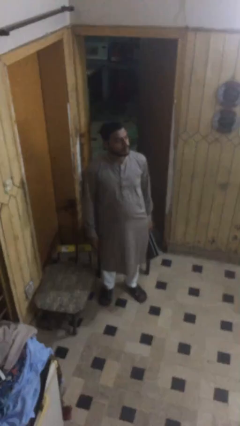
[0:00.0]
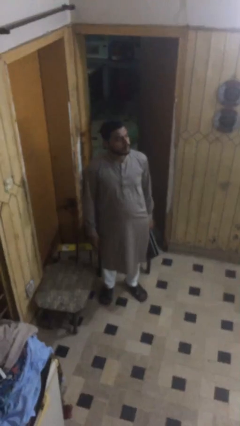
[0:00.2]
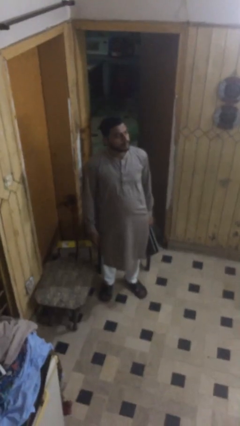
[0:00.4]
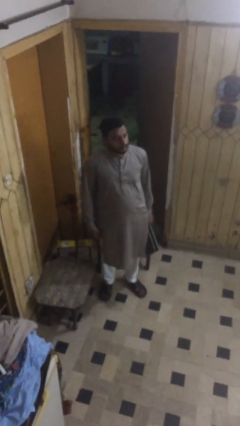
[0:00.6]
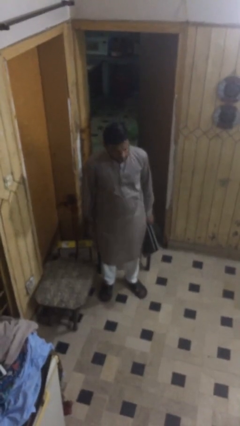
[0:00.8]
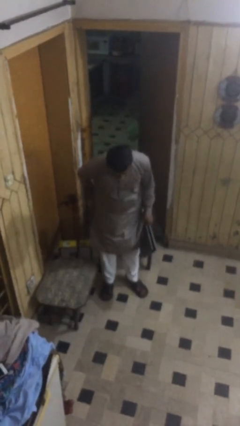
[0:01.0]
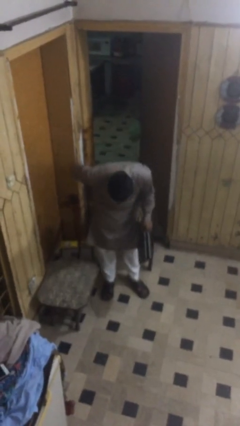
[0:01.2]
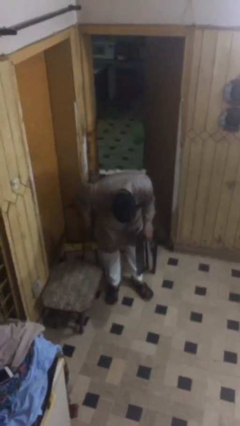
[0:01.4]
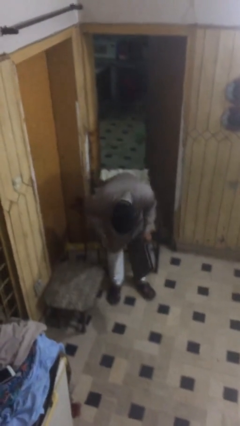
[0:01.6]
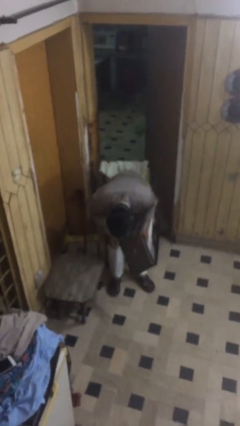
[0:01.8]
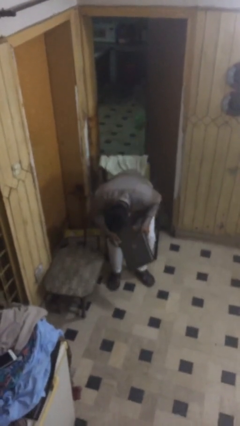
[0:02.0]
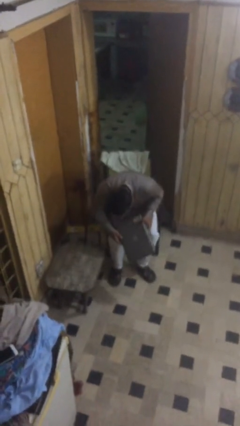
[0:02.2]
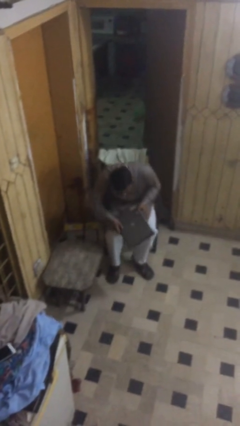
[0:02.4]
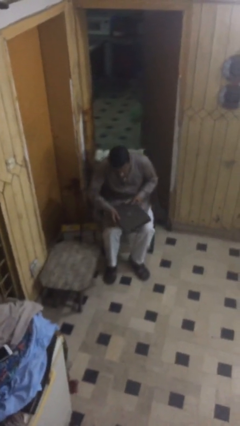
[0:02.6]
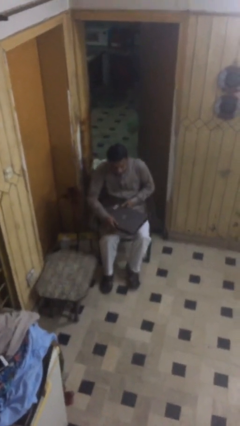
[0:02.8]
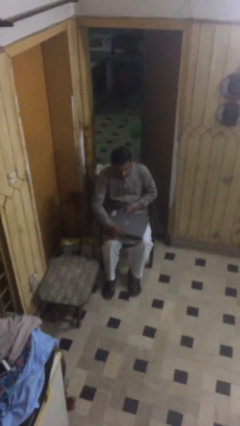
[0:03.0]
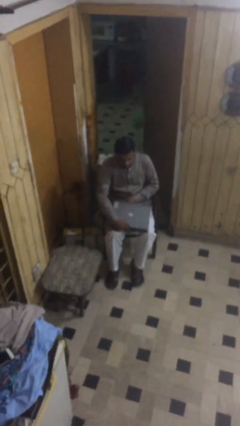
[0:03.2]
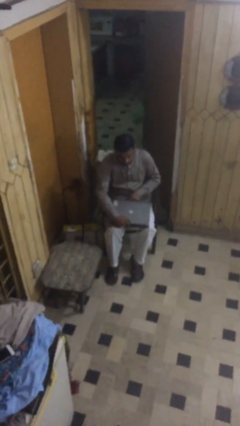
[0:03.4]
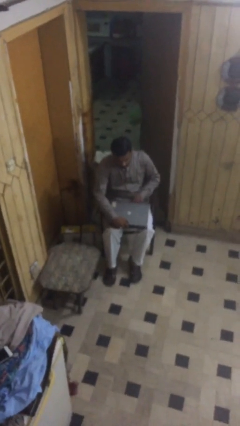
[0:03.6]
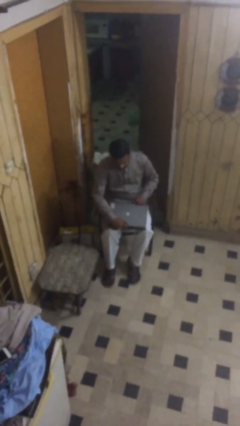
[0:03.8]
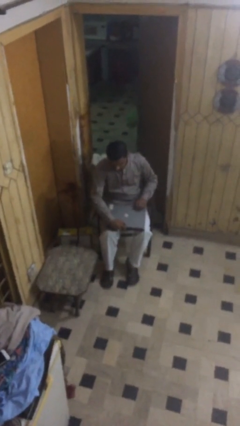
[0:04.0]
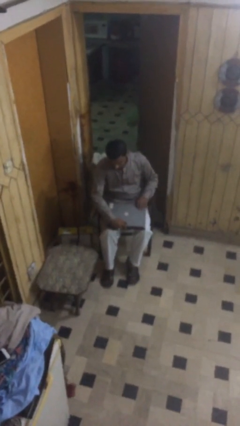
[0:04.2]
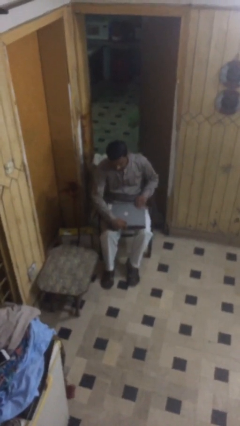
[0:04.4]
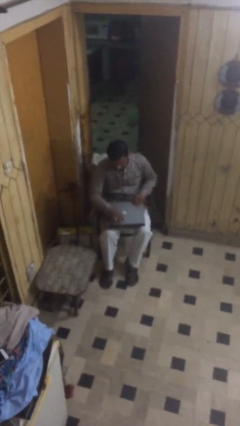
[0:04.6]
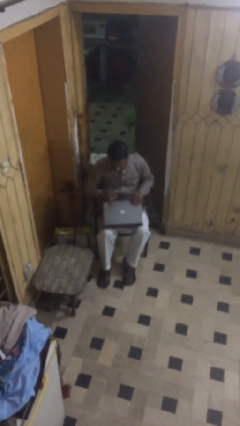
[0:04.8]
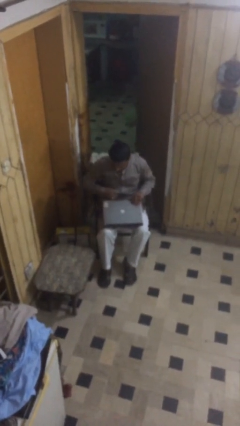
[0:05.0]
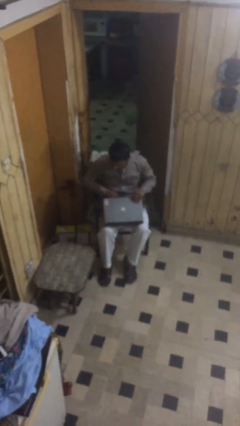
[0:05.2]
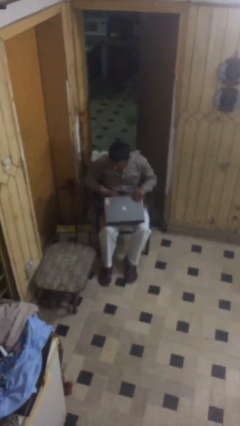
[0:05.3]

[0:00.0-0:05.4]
person sits down

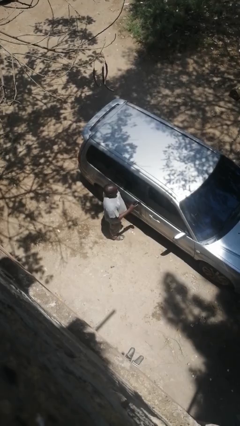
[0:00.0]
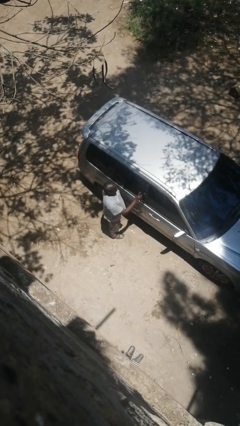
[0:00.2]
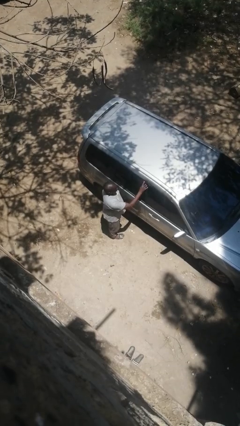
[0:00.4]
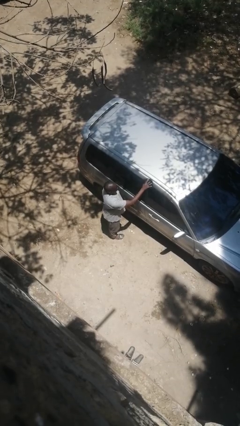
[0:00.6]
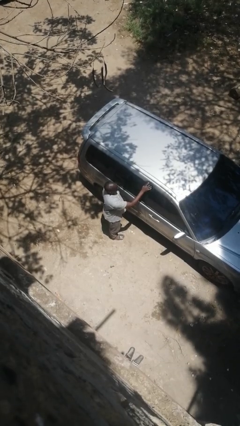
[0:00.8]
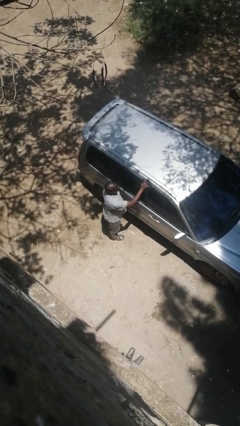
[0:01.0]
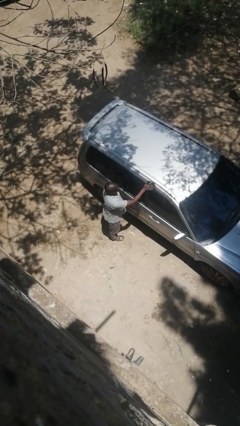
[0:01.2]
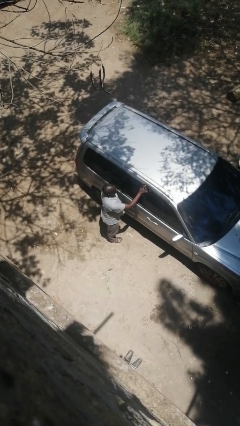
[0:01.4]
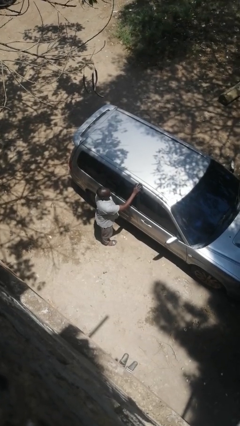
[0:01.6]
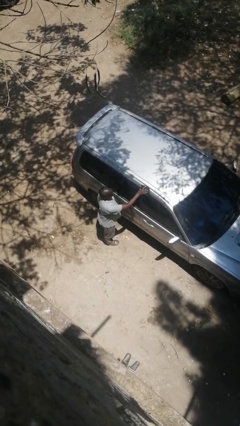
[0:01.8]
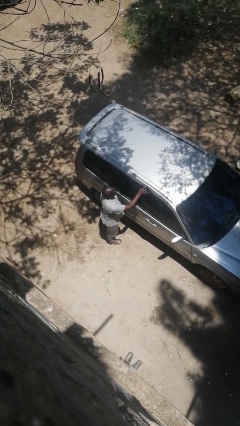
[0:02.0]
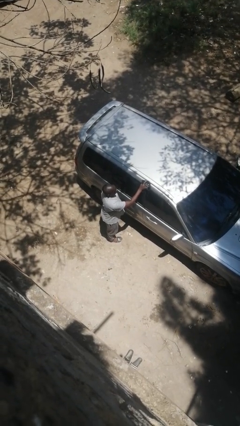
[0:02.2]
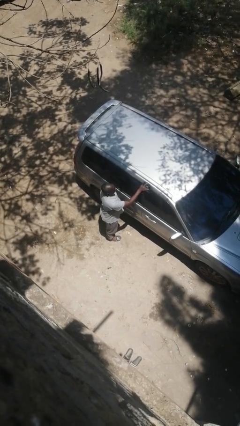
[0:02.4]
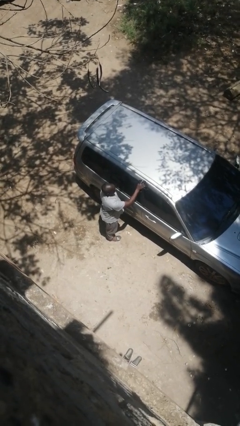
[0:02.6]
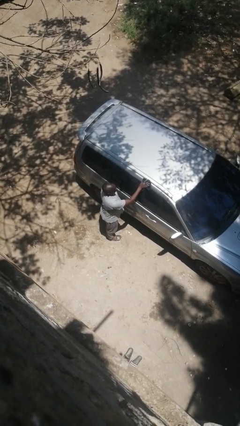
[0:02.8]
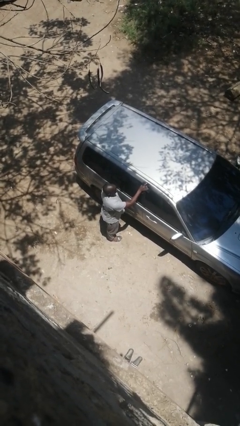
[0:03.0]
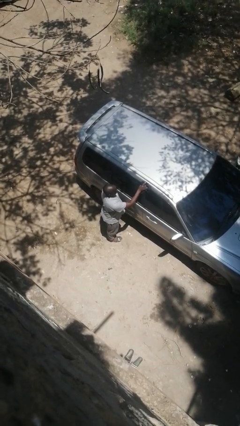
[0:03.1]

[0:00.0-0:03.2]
person polishes car with rag

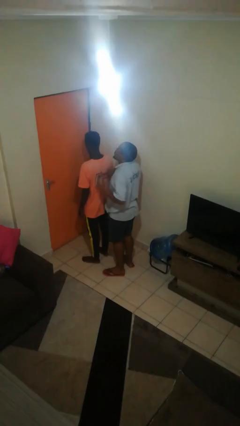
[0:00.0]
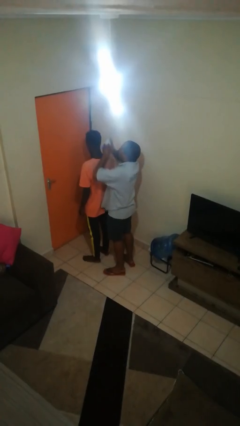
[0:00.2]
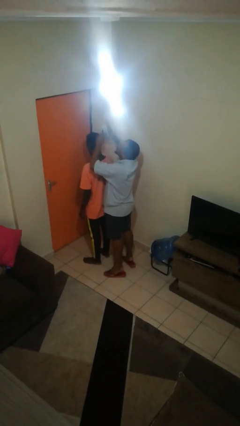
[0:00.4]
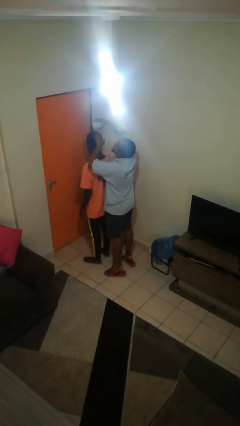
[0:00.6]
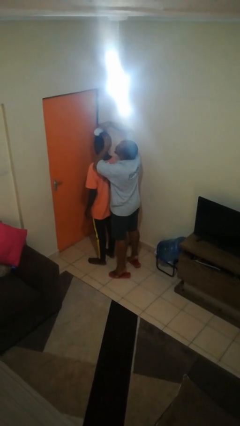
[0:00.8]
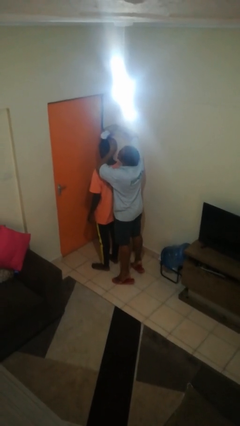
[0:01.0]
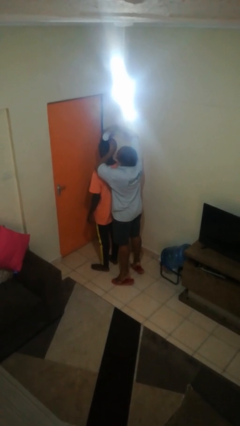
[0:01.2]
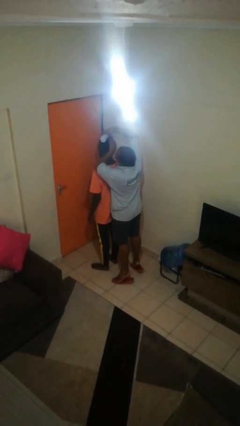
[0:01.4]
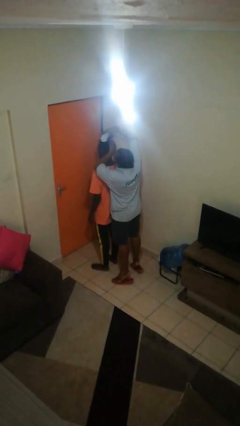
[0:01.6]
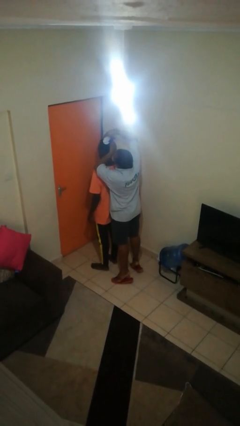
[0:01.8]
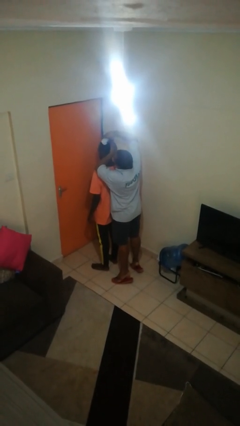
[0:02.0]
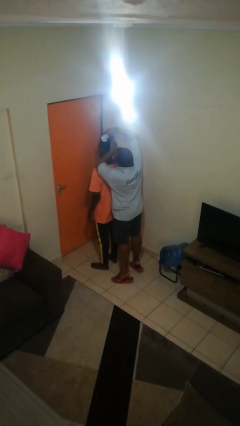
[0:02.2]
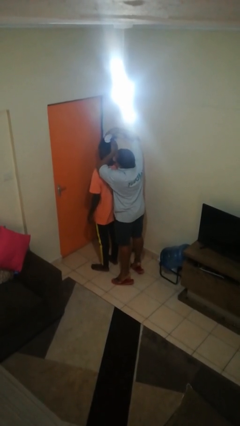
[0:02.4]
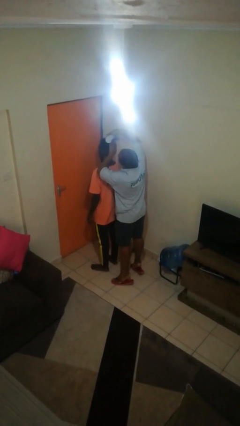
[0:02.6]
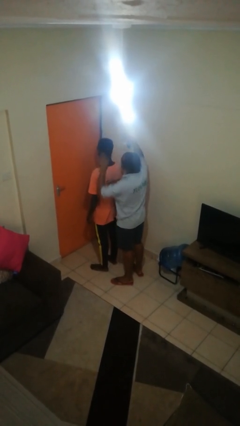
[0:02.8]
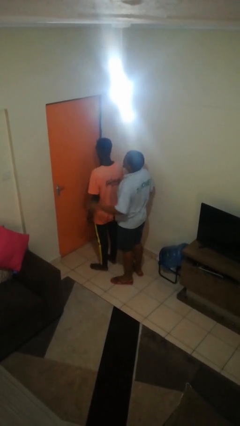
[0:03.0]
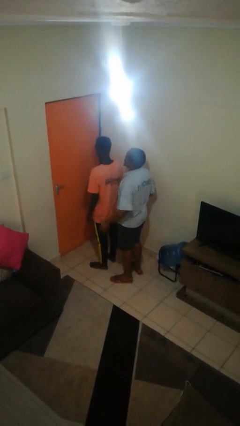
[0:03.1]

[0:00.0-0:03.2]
person brushes hair of person

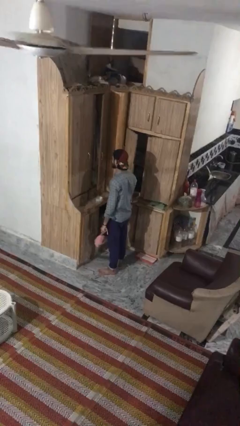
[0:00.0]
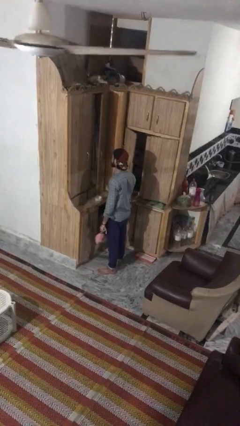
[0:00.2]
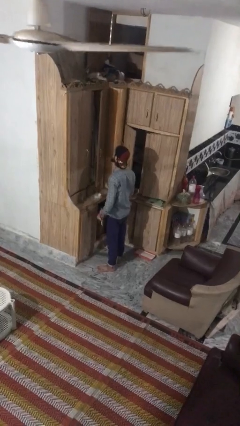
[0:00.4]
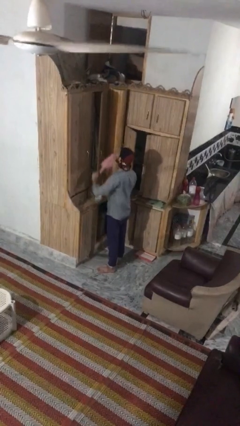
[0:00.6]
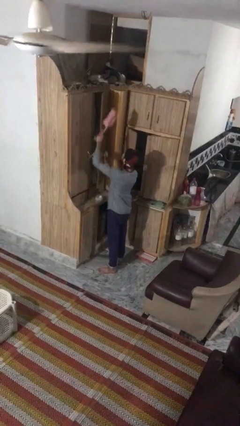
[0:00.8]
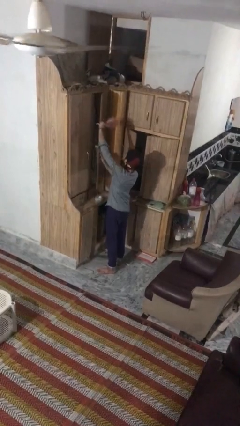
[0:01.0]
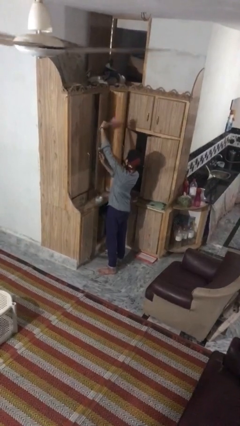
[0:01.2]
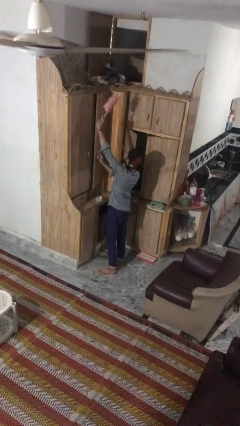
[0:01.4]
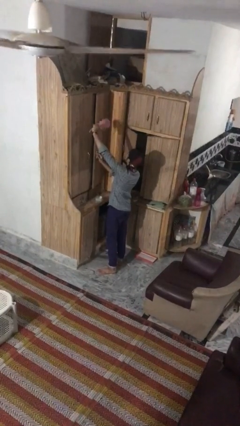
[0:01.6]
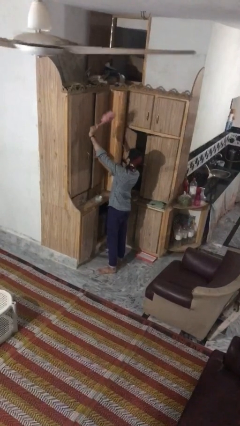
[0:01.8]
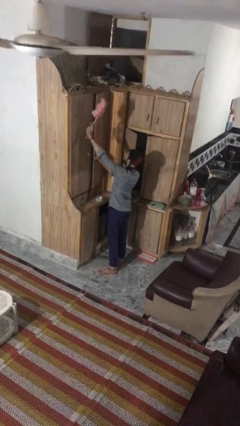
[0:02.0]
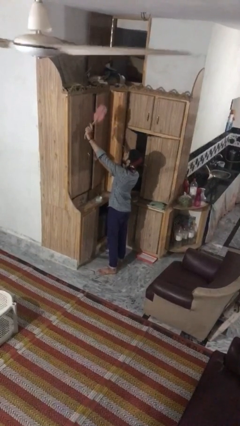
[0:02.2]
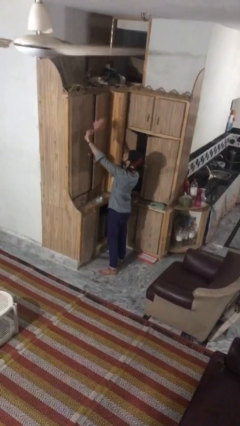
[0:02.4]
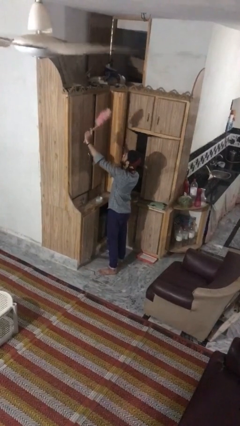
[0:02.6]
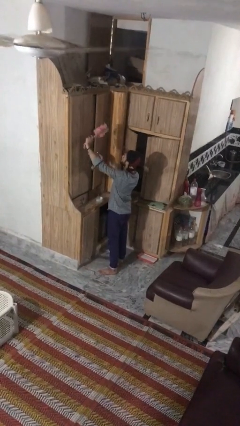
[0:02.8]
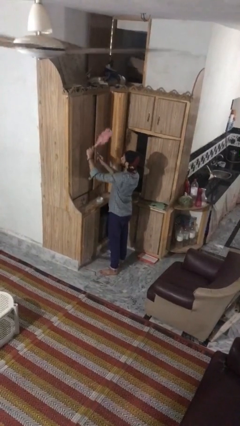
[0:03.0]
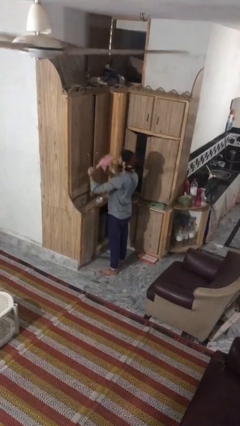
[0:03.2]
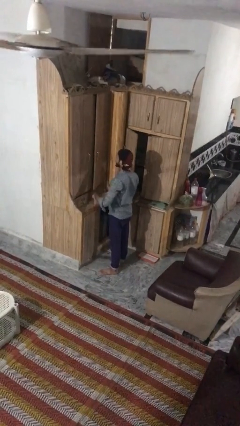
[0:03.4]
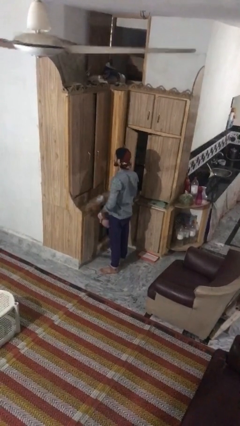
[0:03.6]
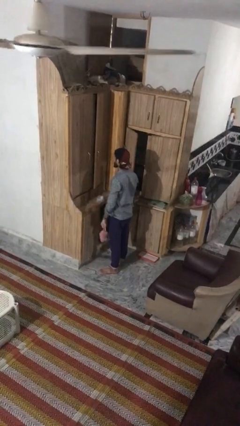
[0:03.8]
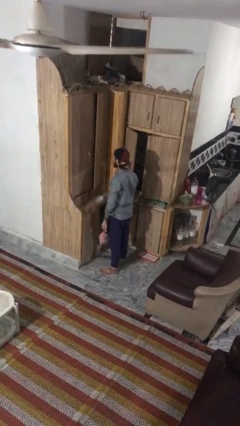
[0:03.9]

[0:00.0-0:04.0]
person dusts furniture

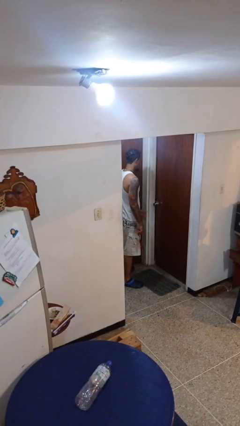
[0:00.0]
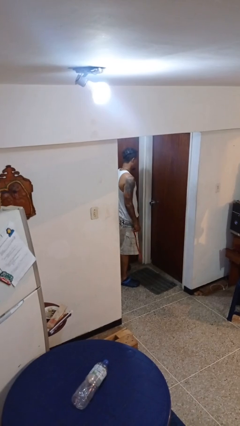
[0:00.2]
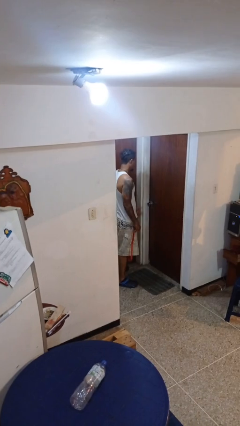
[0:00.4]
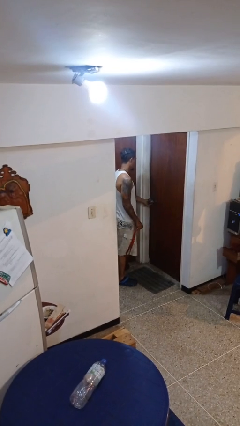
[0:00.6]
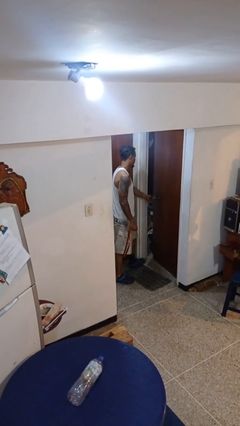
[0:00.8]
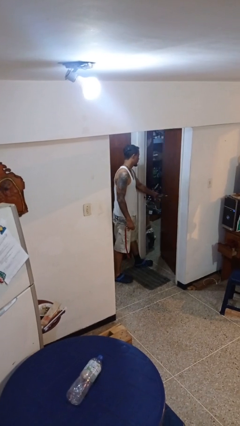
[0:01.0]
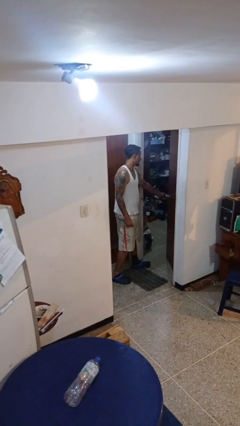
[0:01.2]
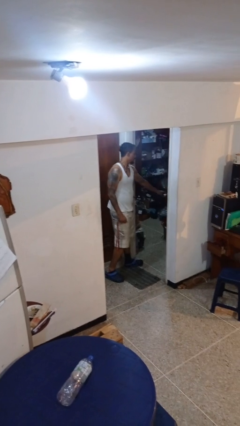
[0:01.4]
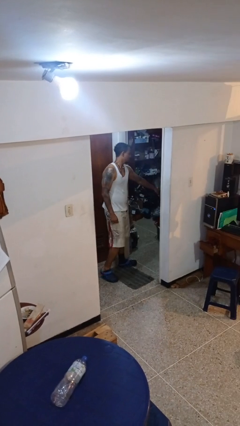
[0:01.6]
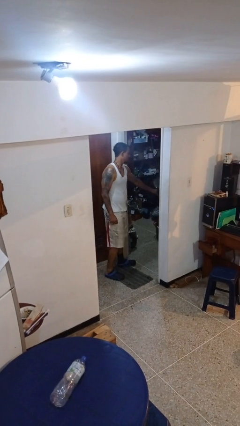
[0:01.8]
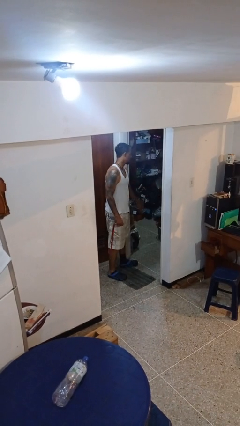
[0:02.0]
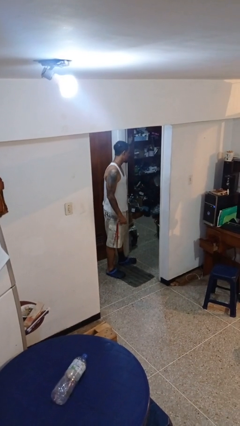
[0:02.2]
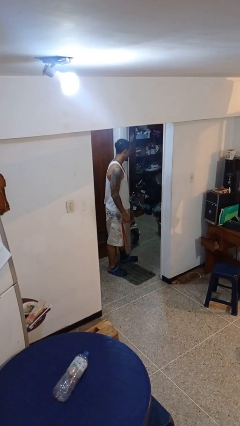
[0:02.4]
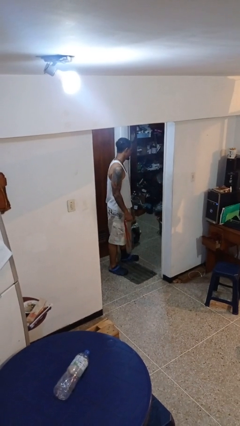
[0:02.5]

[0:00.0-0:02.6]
person opens facility door
